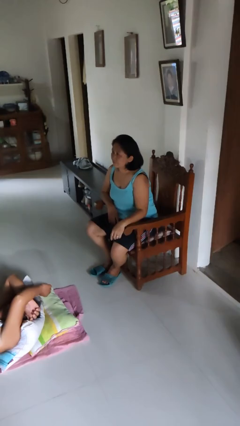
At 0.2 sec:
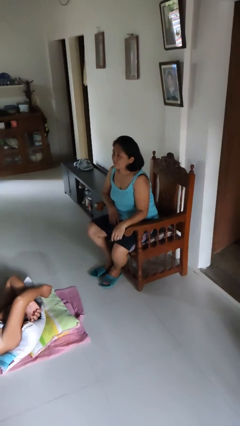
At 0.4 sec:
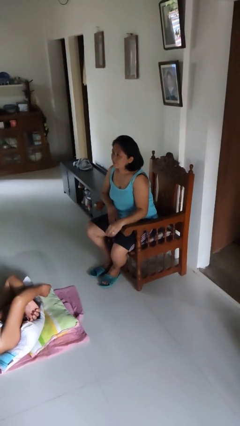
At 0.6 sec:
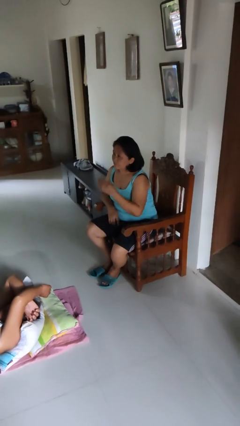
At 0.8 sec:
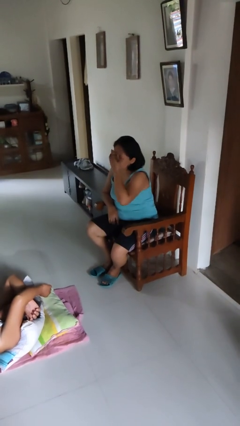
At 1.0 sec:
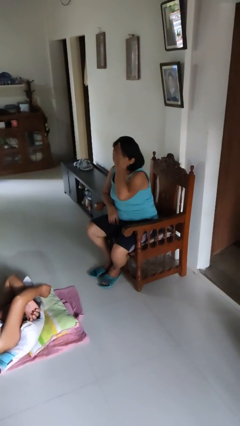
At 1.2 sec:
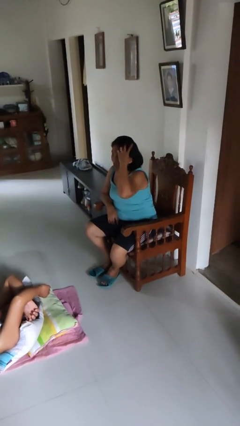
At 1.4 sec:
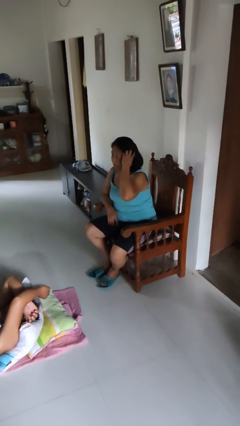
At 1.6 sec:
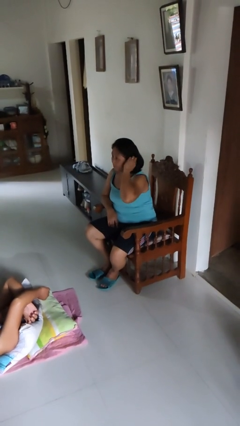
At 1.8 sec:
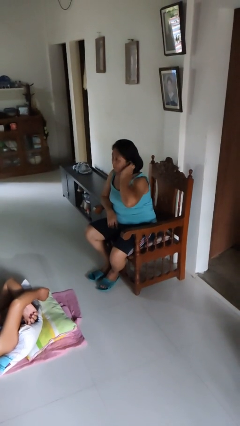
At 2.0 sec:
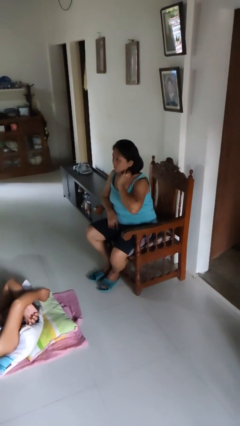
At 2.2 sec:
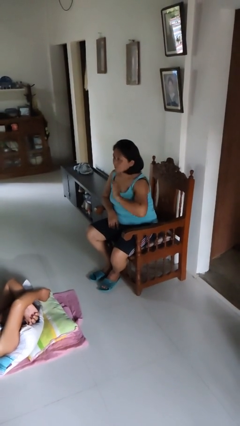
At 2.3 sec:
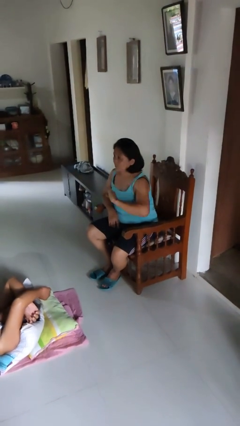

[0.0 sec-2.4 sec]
person strokes hair

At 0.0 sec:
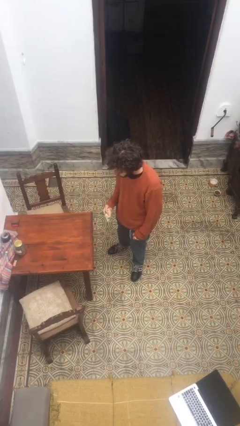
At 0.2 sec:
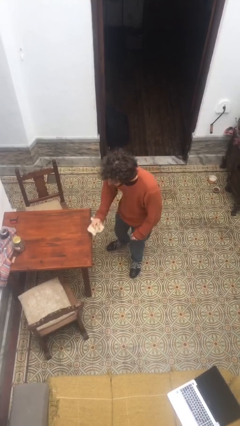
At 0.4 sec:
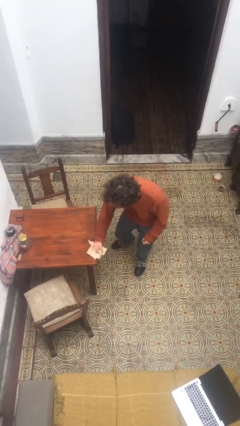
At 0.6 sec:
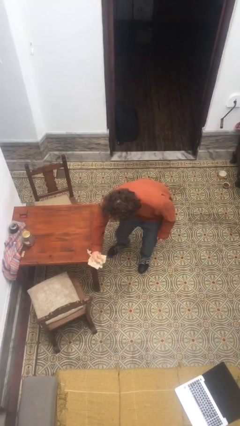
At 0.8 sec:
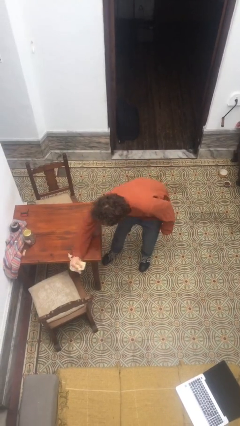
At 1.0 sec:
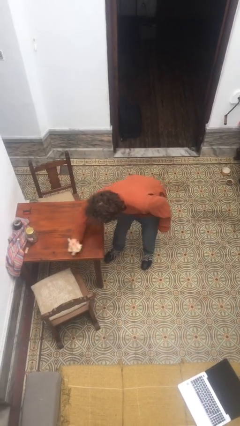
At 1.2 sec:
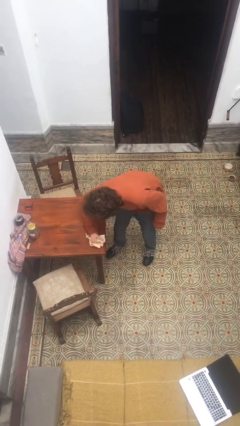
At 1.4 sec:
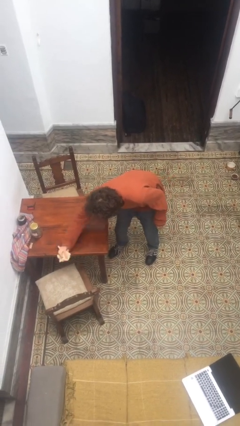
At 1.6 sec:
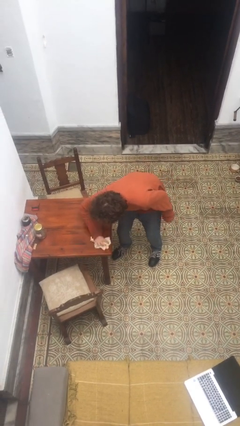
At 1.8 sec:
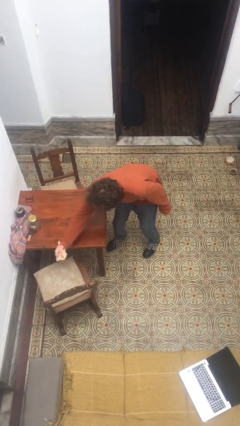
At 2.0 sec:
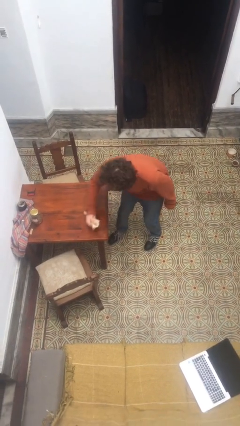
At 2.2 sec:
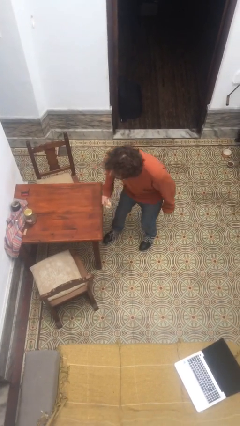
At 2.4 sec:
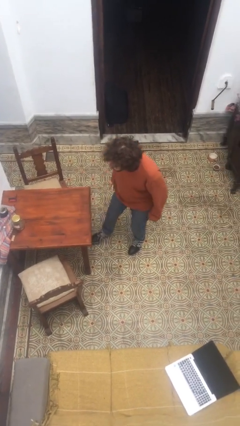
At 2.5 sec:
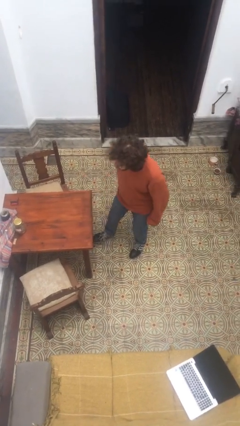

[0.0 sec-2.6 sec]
person cleans table with rag

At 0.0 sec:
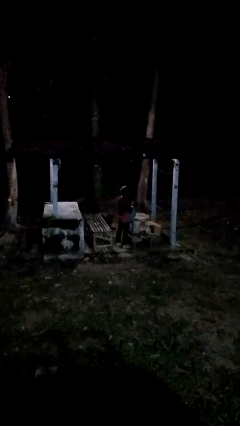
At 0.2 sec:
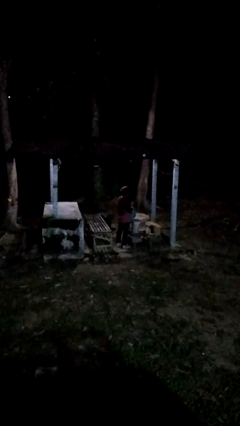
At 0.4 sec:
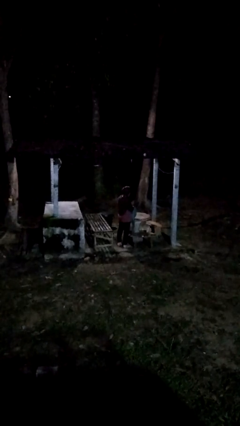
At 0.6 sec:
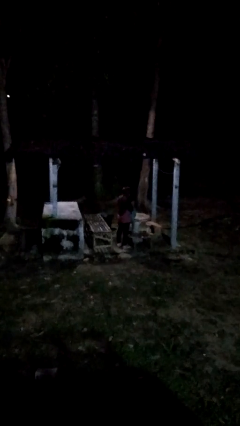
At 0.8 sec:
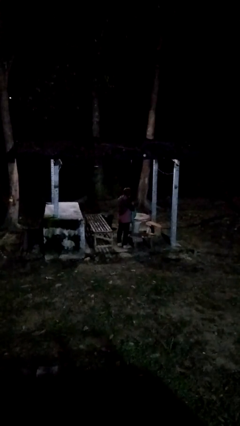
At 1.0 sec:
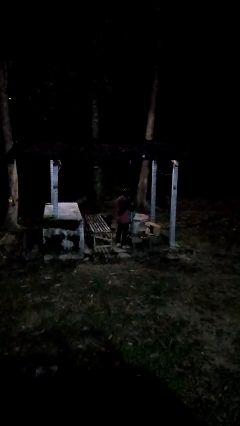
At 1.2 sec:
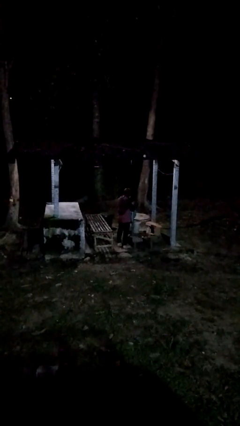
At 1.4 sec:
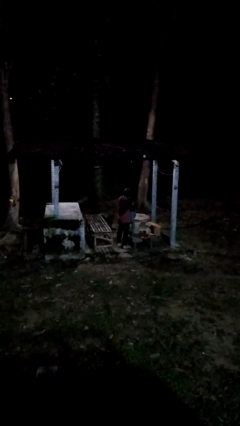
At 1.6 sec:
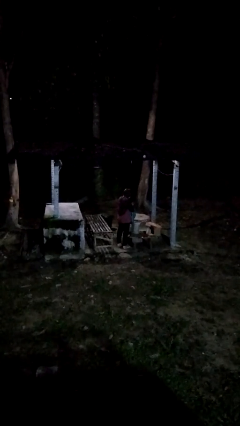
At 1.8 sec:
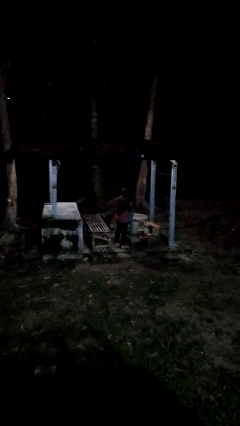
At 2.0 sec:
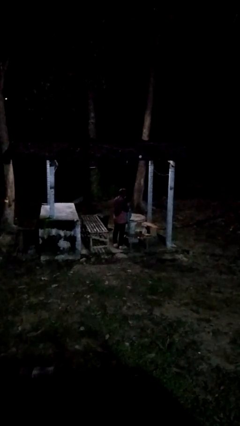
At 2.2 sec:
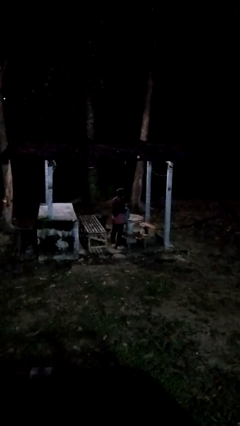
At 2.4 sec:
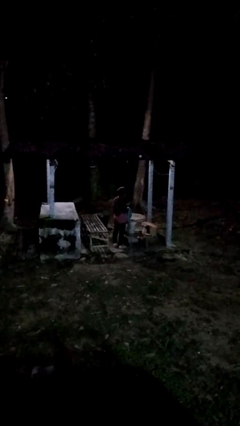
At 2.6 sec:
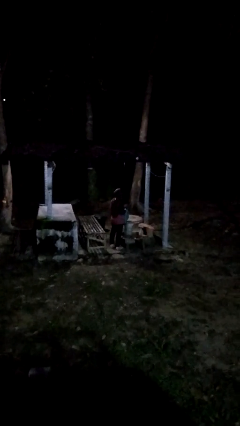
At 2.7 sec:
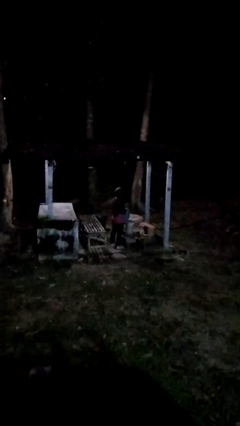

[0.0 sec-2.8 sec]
person searches in bag

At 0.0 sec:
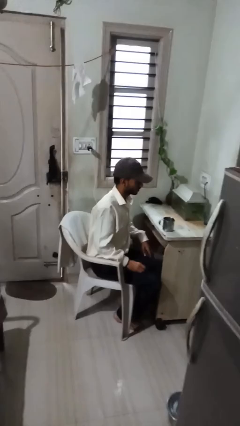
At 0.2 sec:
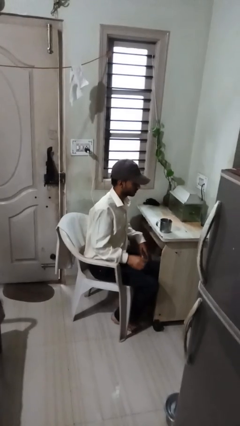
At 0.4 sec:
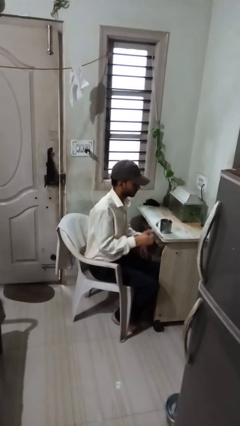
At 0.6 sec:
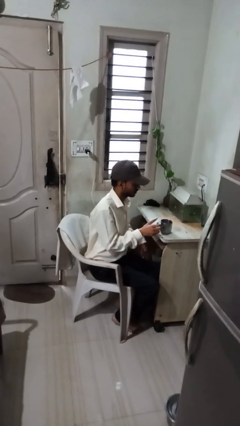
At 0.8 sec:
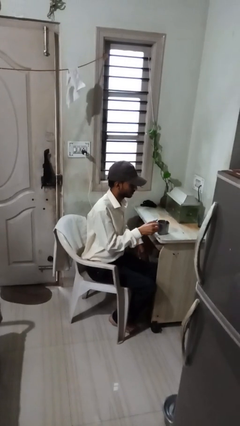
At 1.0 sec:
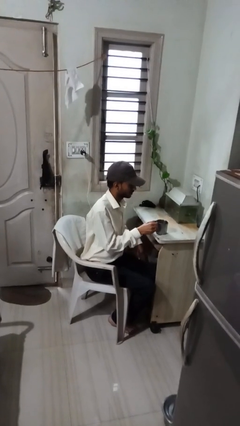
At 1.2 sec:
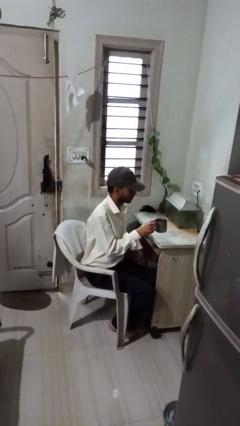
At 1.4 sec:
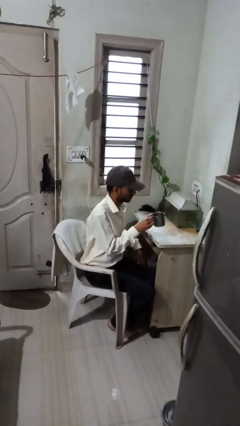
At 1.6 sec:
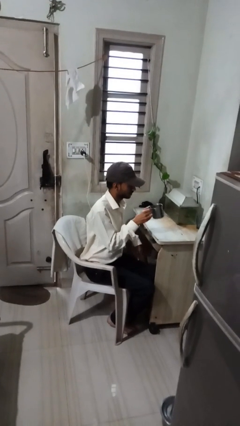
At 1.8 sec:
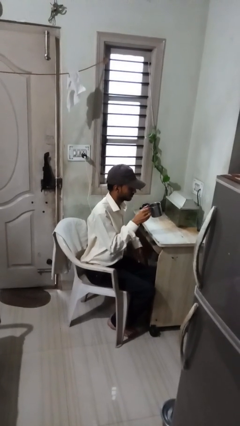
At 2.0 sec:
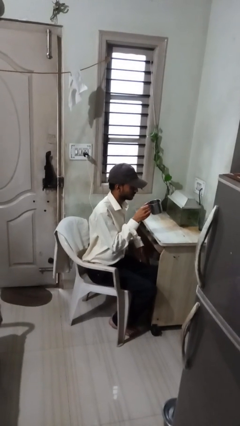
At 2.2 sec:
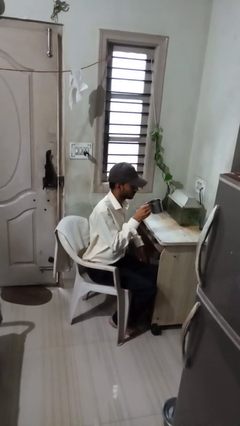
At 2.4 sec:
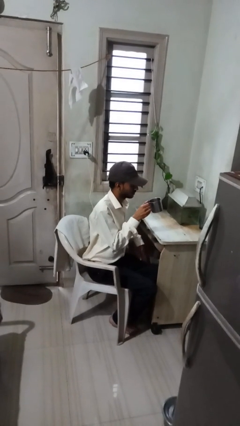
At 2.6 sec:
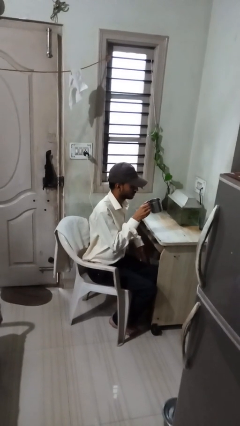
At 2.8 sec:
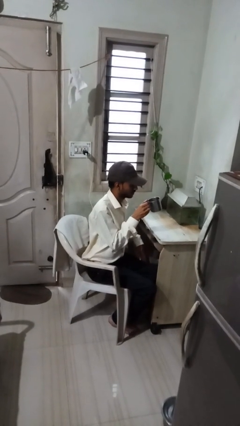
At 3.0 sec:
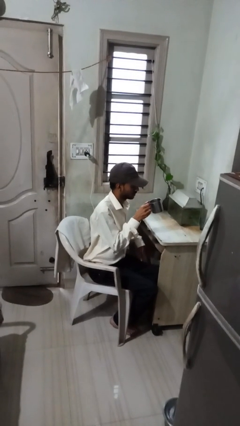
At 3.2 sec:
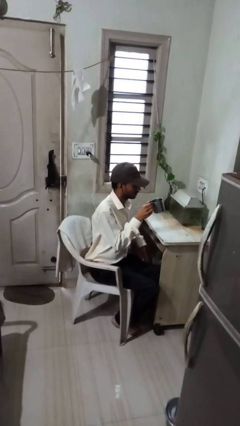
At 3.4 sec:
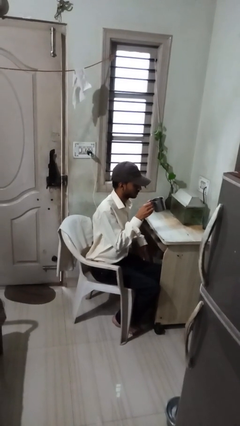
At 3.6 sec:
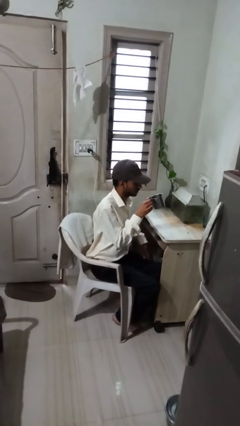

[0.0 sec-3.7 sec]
person picks up object from table

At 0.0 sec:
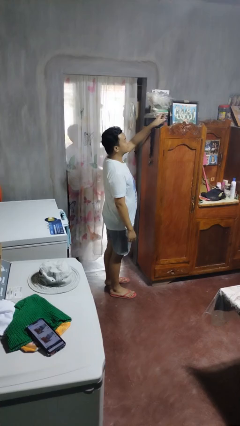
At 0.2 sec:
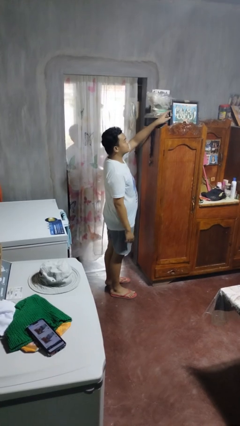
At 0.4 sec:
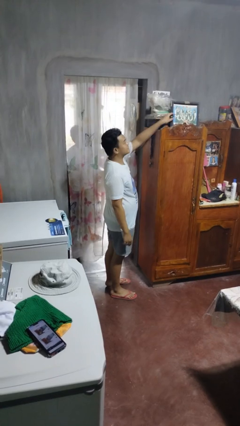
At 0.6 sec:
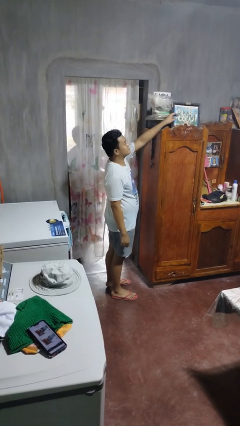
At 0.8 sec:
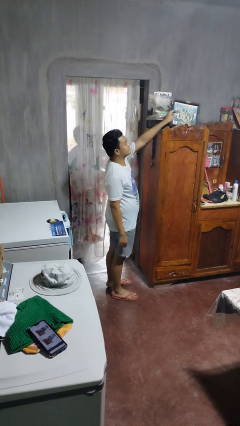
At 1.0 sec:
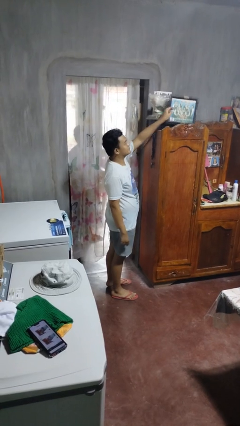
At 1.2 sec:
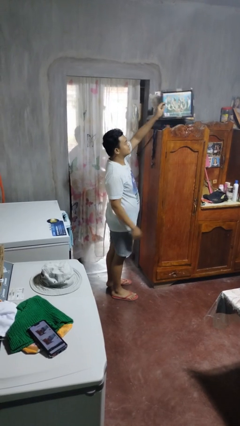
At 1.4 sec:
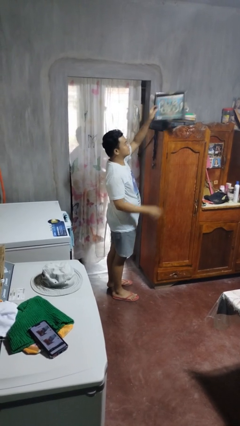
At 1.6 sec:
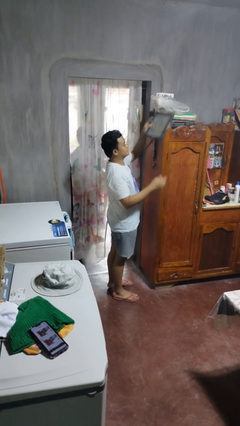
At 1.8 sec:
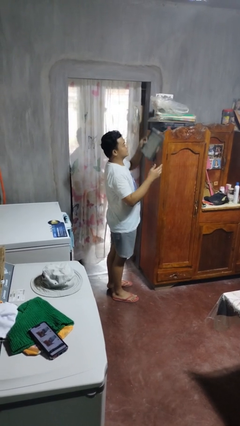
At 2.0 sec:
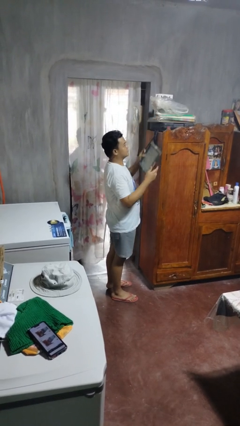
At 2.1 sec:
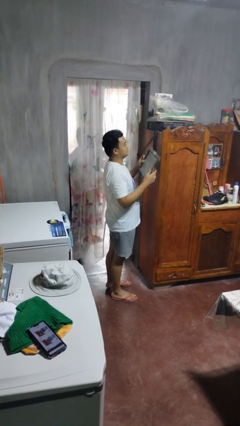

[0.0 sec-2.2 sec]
person picks up object from shelf

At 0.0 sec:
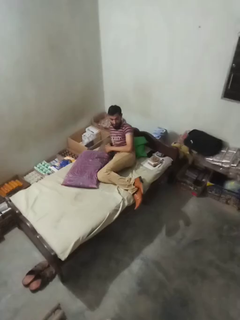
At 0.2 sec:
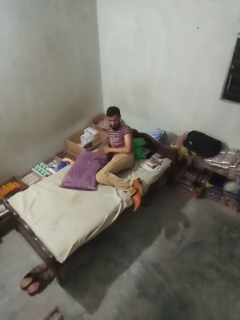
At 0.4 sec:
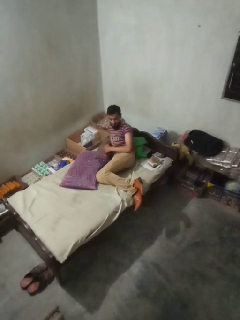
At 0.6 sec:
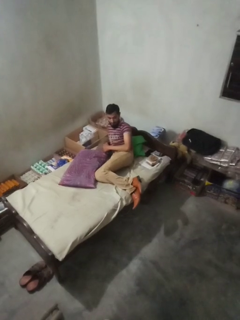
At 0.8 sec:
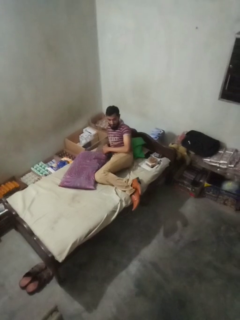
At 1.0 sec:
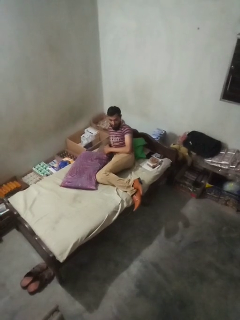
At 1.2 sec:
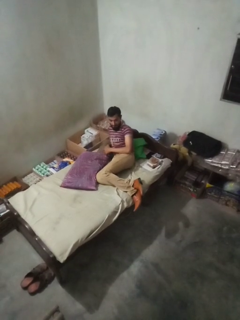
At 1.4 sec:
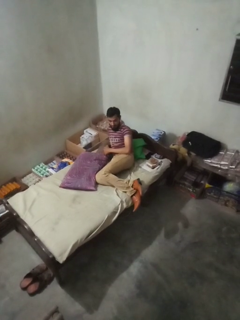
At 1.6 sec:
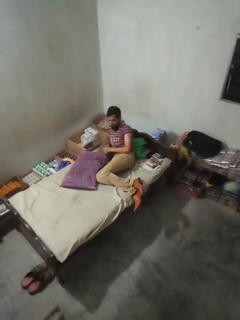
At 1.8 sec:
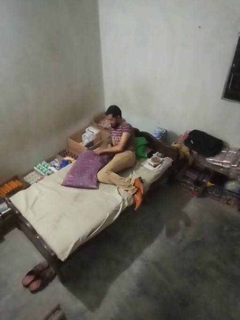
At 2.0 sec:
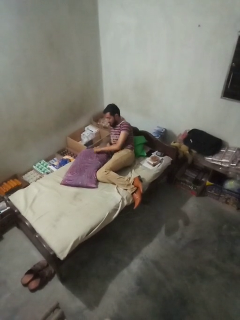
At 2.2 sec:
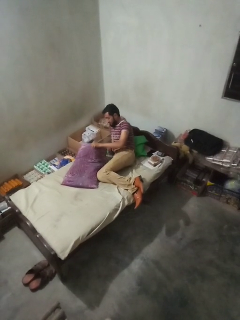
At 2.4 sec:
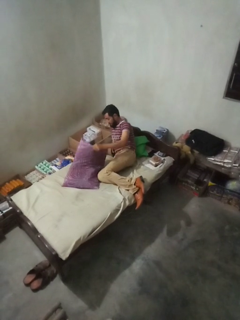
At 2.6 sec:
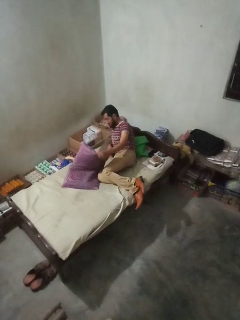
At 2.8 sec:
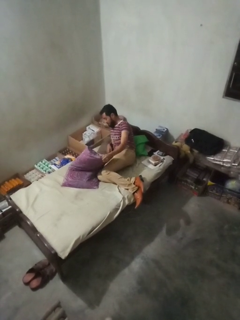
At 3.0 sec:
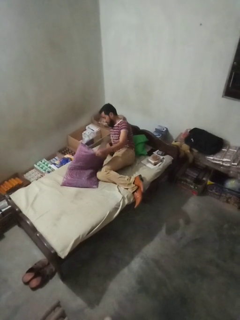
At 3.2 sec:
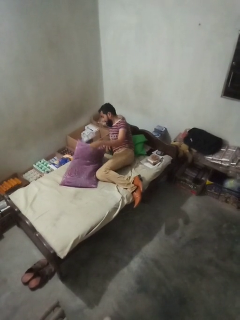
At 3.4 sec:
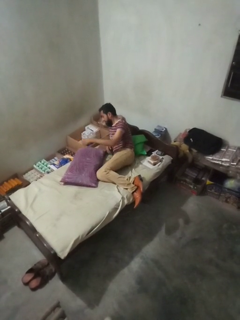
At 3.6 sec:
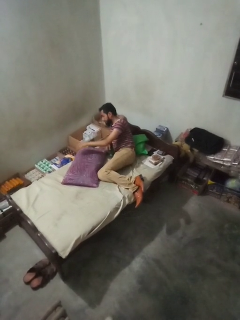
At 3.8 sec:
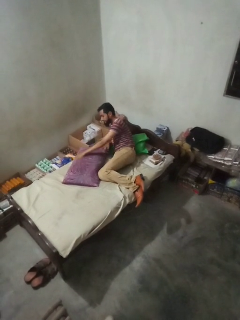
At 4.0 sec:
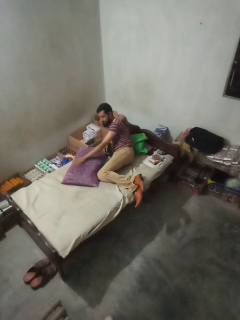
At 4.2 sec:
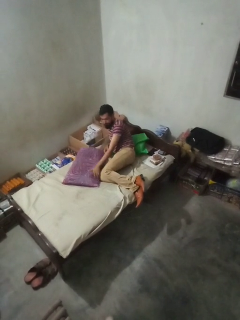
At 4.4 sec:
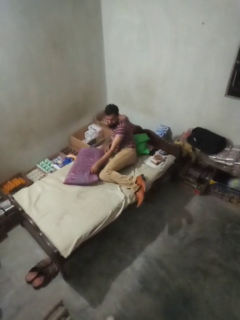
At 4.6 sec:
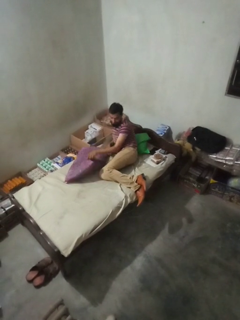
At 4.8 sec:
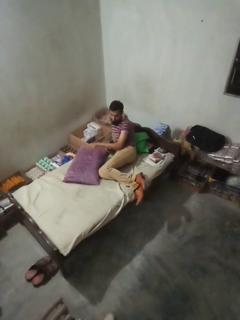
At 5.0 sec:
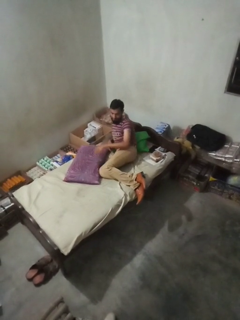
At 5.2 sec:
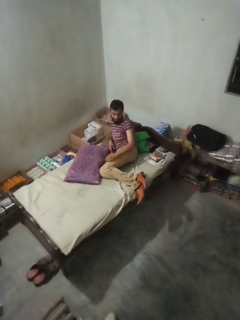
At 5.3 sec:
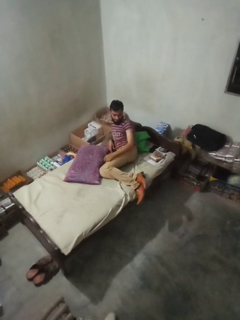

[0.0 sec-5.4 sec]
person searches under bed
